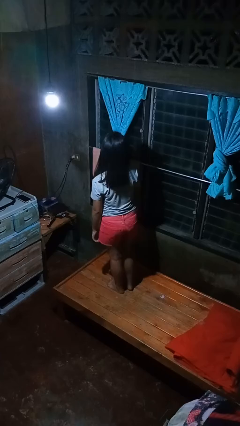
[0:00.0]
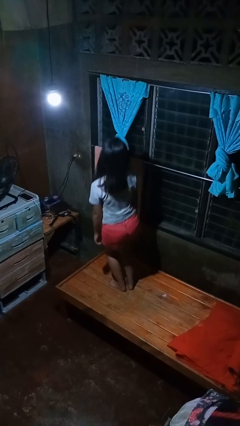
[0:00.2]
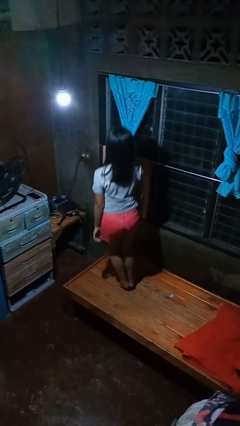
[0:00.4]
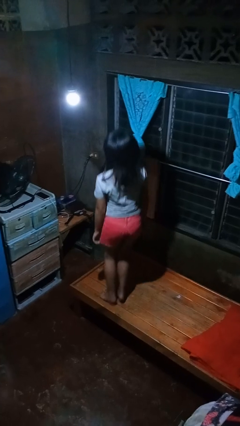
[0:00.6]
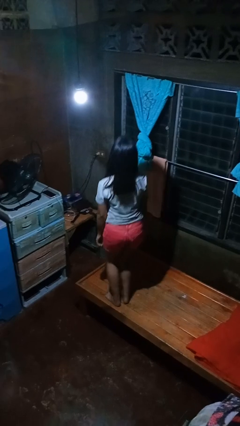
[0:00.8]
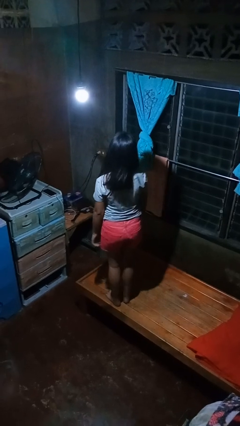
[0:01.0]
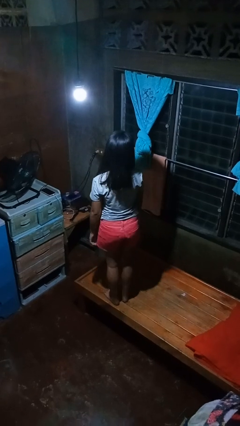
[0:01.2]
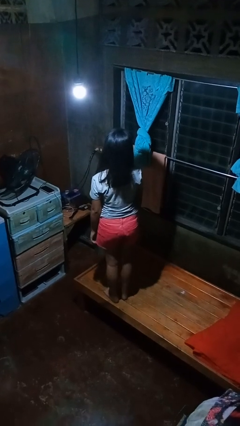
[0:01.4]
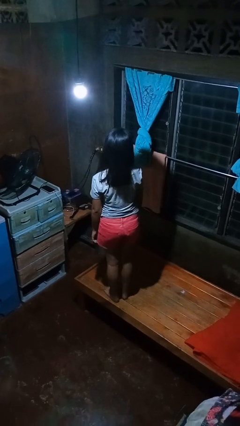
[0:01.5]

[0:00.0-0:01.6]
person jumps on bed

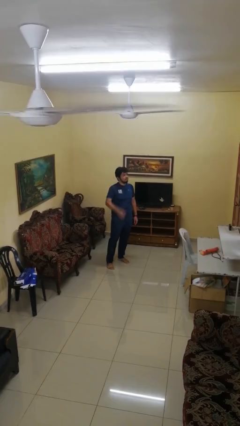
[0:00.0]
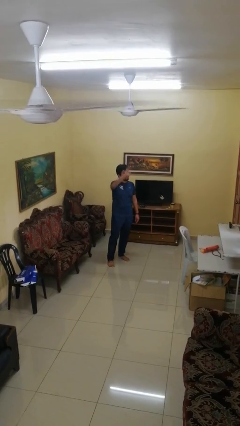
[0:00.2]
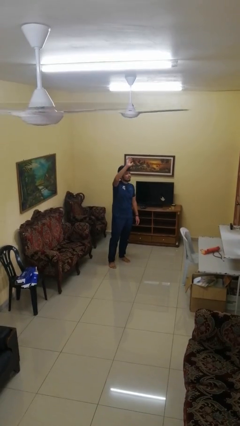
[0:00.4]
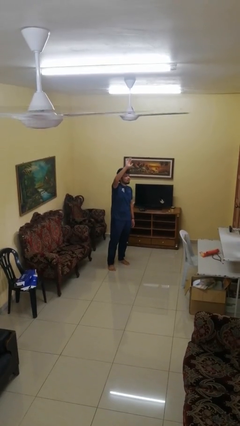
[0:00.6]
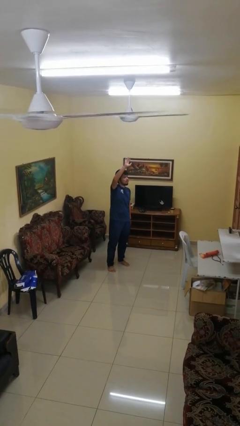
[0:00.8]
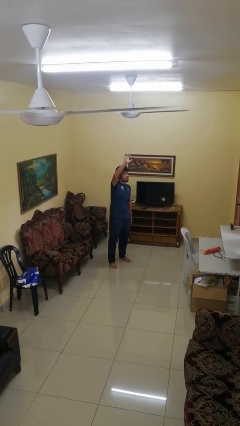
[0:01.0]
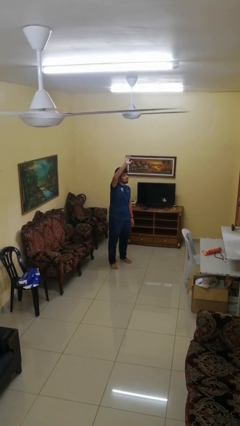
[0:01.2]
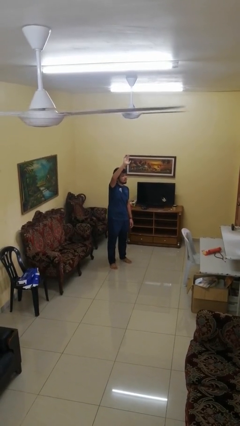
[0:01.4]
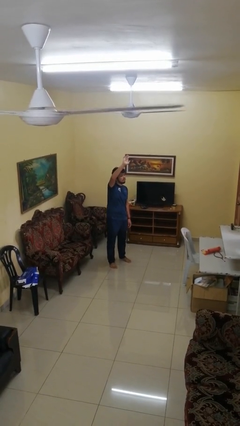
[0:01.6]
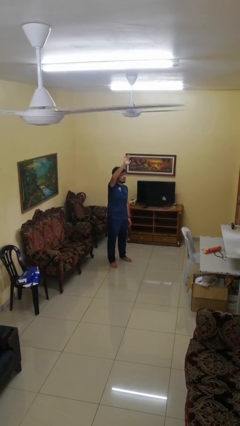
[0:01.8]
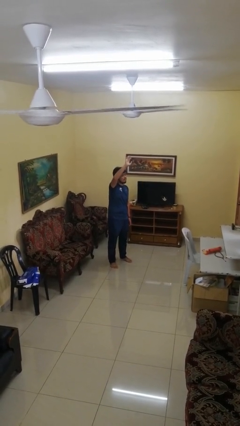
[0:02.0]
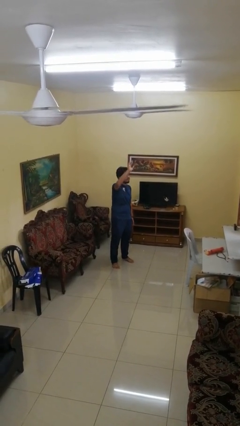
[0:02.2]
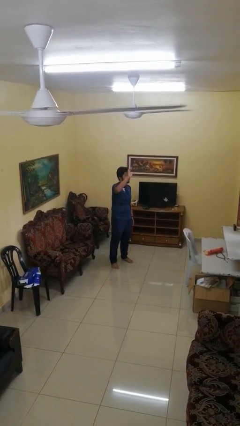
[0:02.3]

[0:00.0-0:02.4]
person gestures raise hand

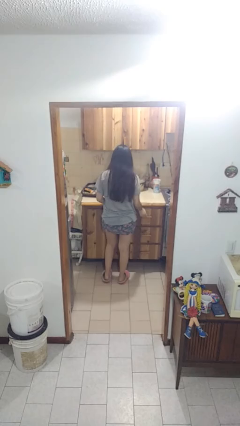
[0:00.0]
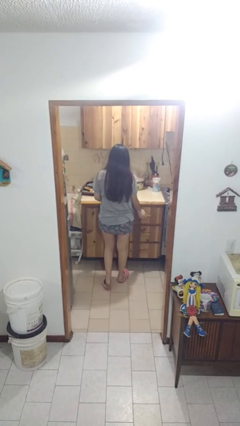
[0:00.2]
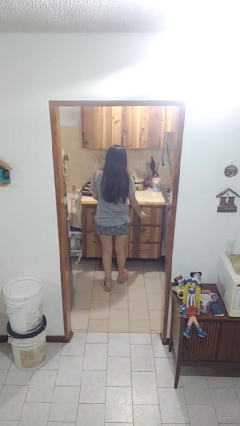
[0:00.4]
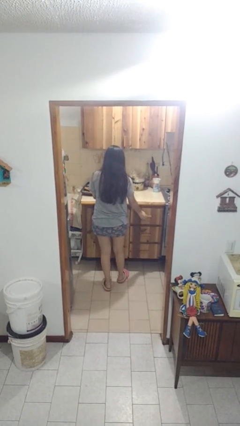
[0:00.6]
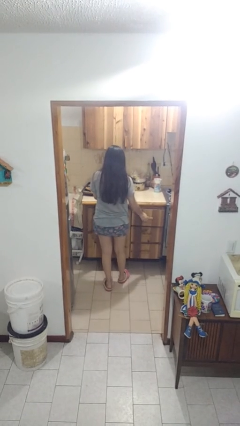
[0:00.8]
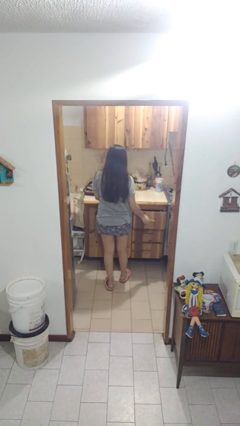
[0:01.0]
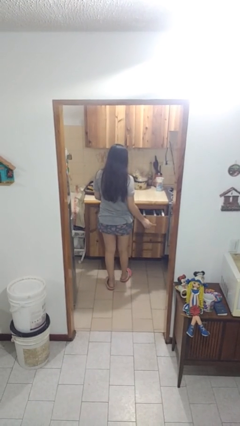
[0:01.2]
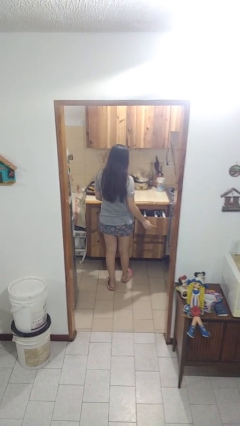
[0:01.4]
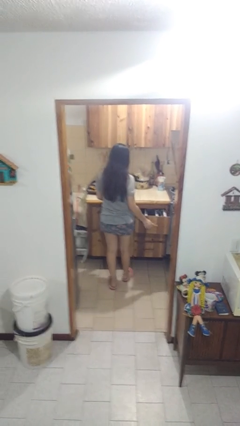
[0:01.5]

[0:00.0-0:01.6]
person opens kitchen drawer

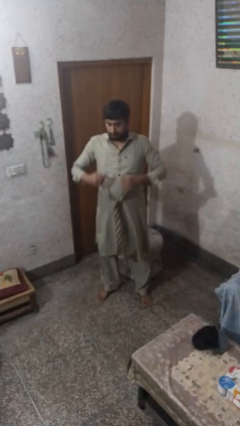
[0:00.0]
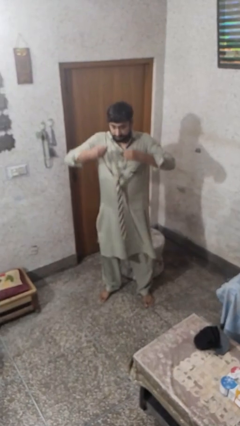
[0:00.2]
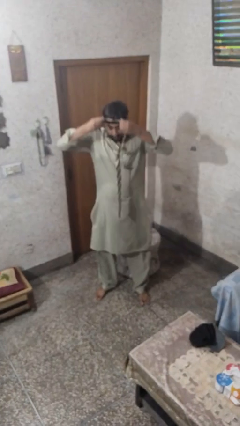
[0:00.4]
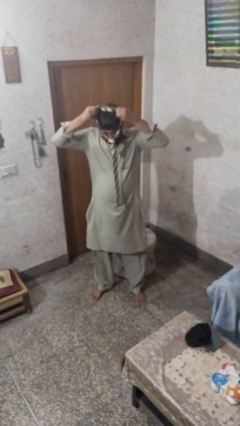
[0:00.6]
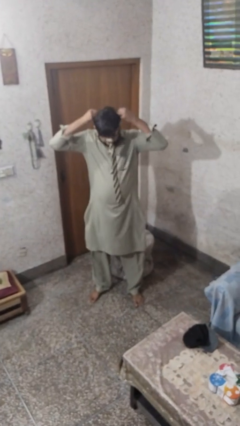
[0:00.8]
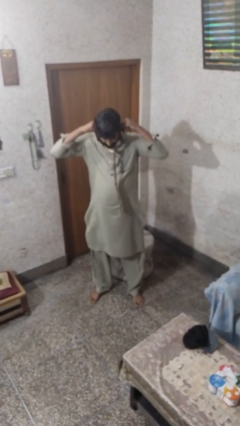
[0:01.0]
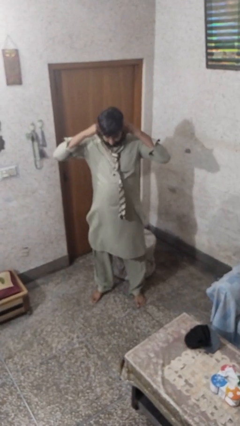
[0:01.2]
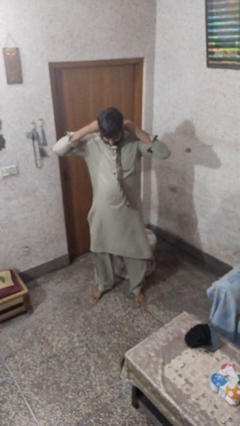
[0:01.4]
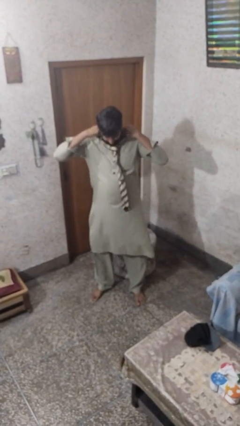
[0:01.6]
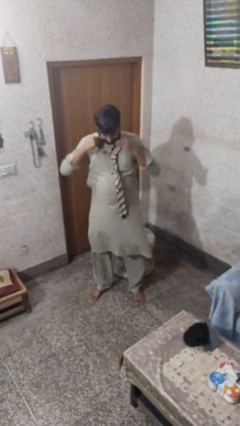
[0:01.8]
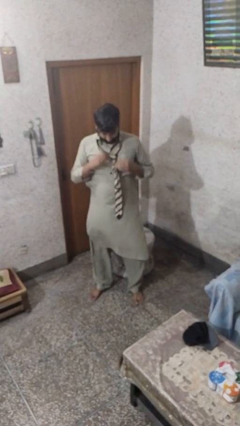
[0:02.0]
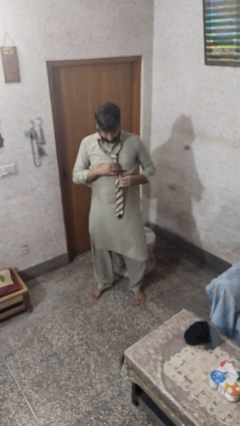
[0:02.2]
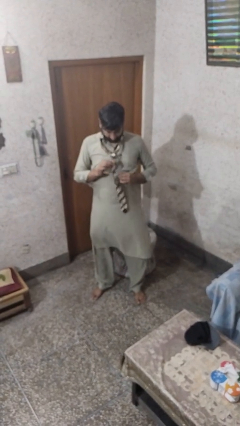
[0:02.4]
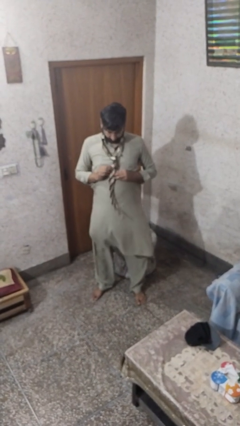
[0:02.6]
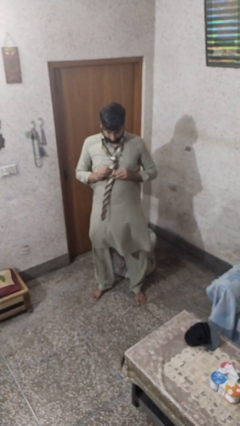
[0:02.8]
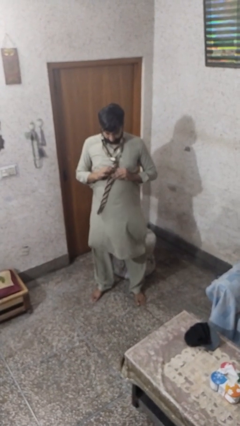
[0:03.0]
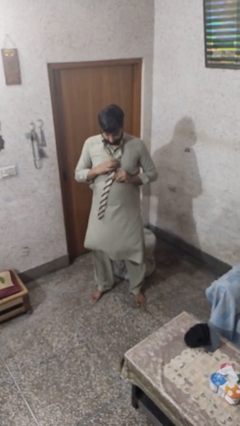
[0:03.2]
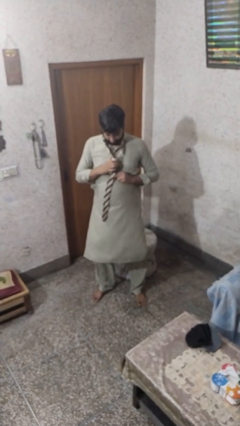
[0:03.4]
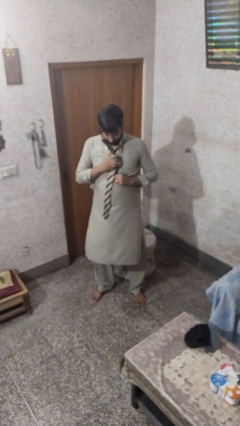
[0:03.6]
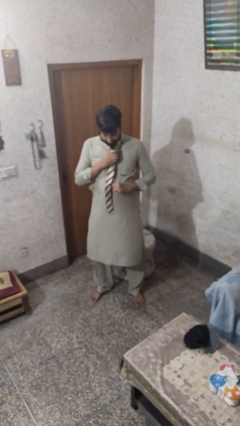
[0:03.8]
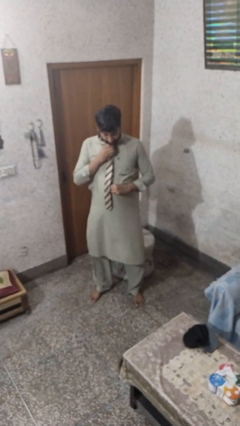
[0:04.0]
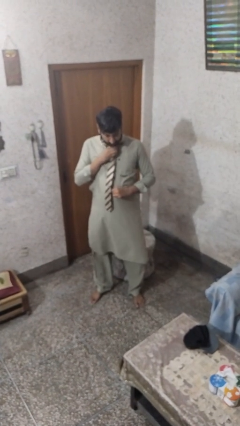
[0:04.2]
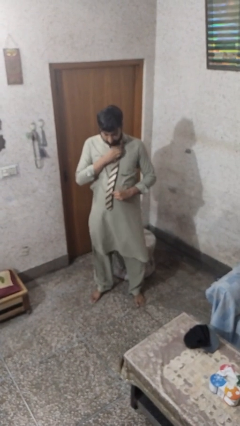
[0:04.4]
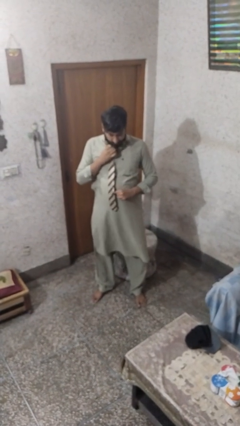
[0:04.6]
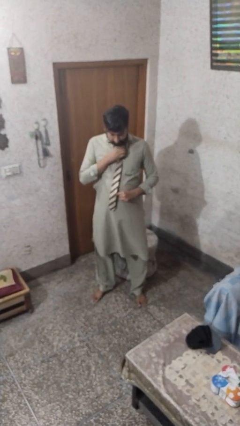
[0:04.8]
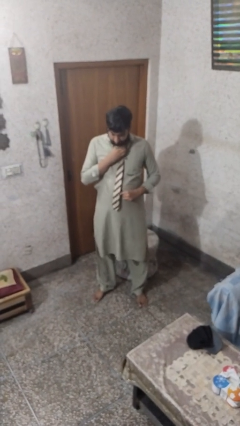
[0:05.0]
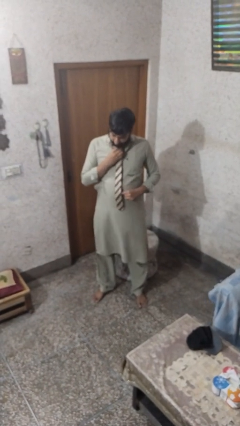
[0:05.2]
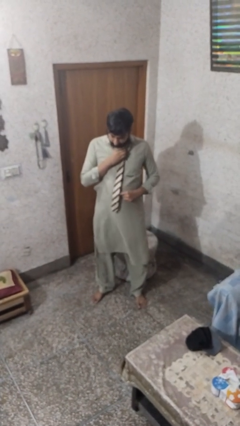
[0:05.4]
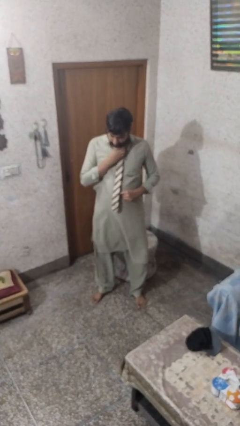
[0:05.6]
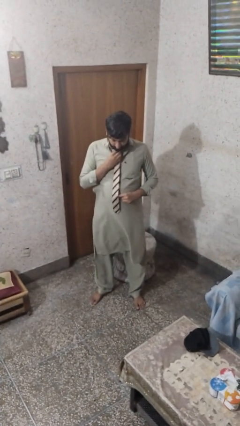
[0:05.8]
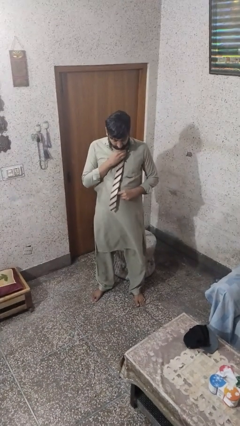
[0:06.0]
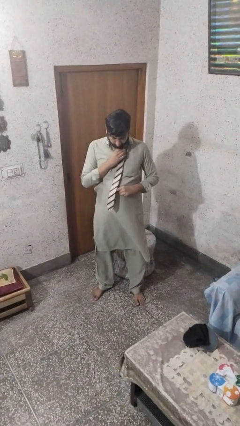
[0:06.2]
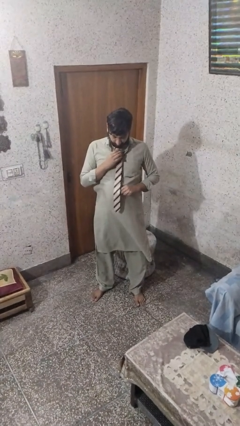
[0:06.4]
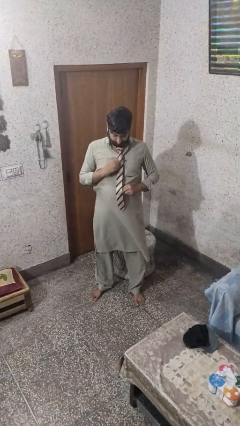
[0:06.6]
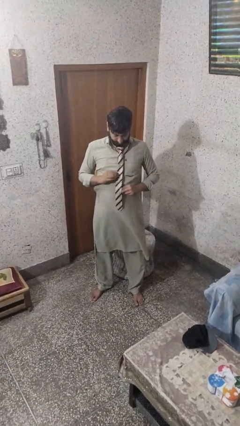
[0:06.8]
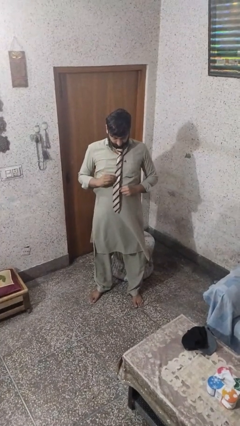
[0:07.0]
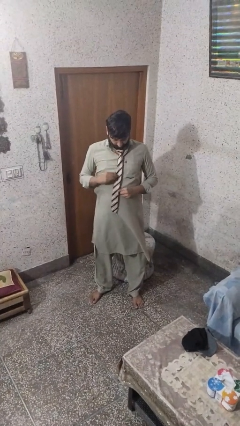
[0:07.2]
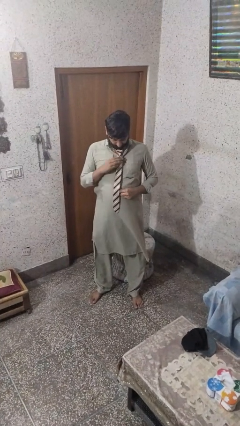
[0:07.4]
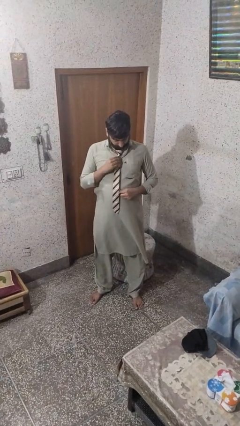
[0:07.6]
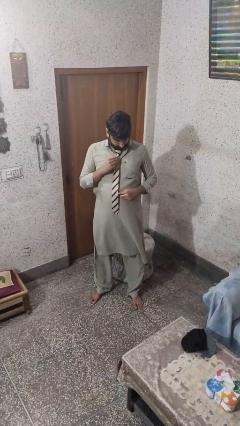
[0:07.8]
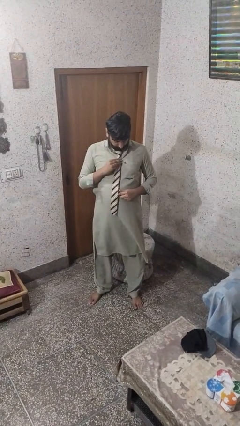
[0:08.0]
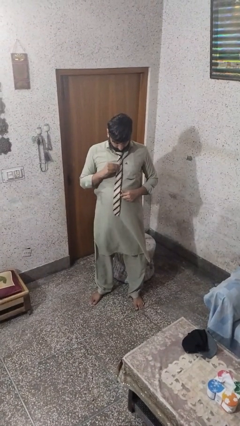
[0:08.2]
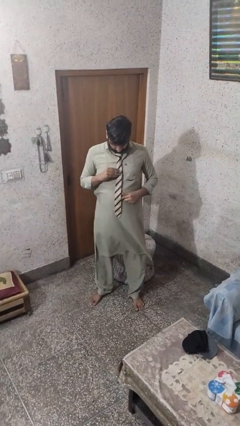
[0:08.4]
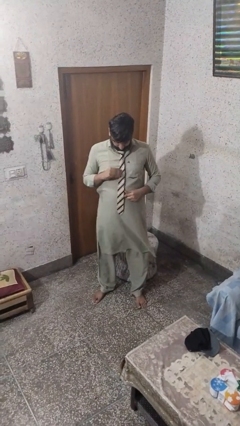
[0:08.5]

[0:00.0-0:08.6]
person puts on necktie

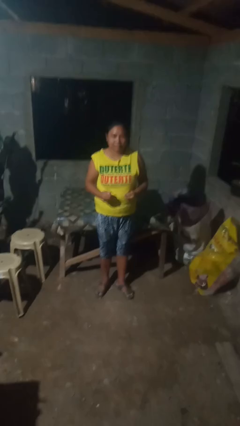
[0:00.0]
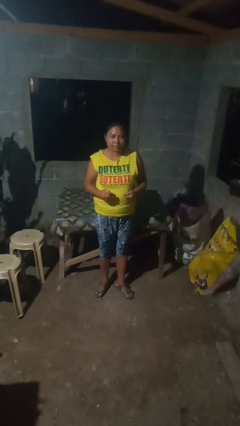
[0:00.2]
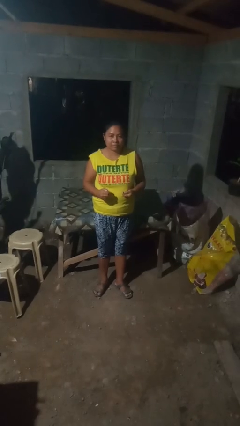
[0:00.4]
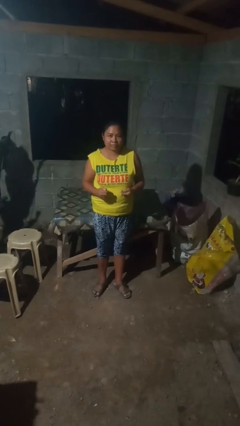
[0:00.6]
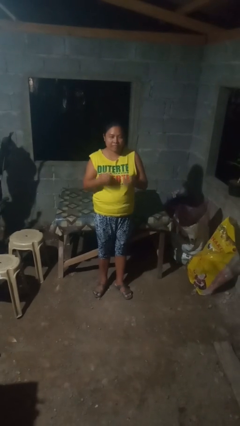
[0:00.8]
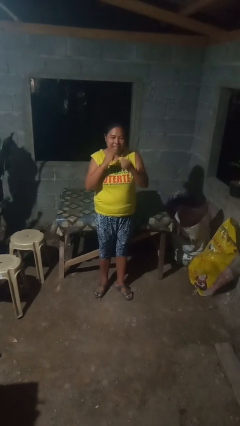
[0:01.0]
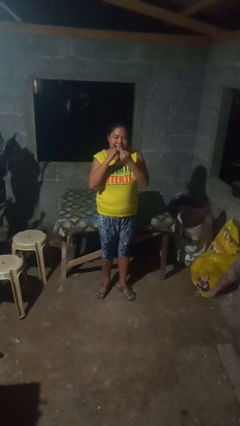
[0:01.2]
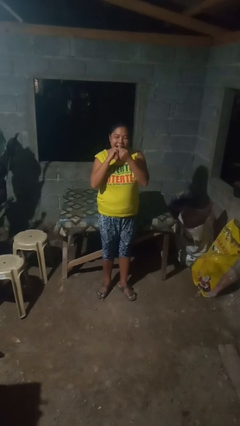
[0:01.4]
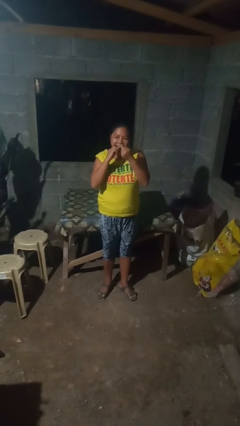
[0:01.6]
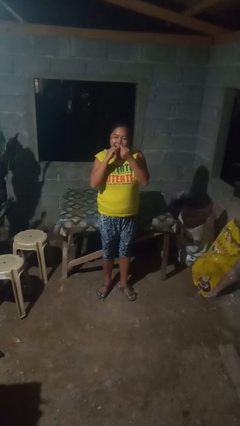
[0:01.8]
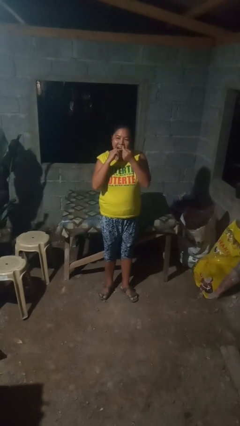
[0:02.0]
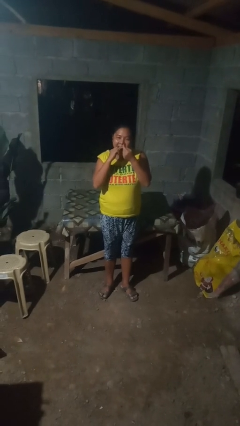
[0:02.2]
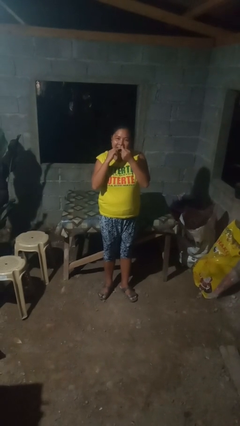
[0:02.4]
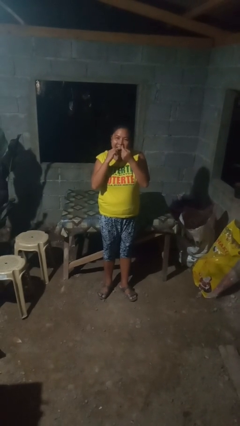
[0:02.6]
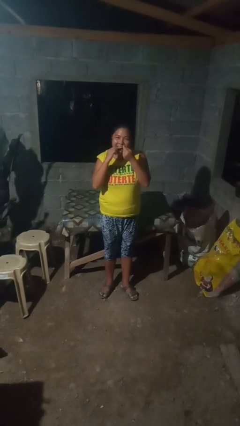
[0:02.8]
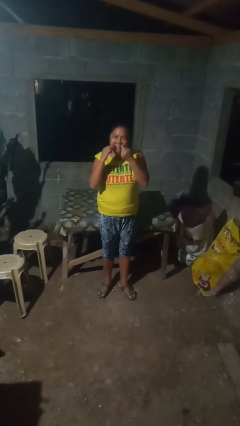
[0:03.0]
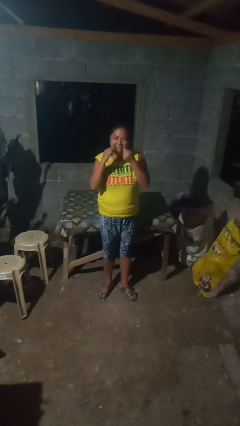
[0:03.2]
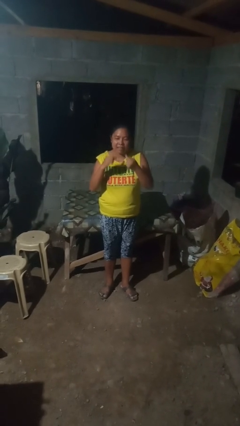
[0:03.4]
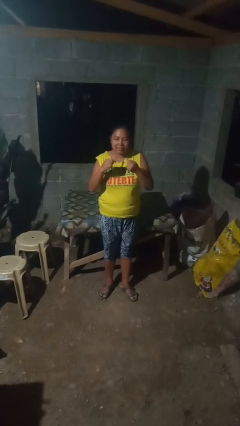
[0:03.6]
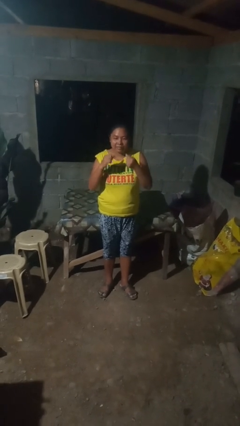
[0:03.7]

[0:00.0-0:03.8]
person flosses

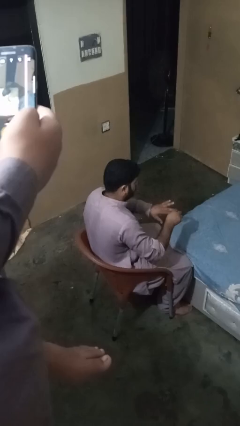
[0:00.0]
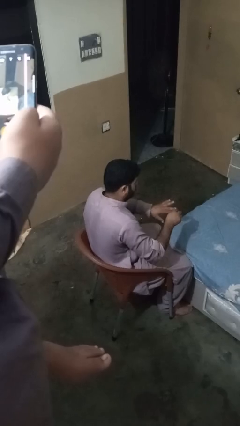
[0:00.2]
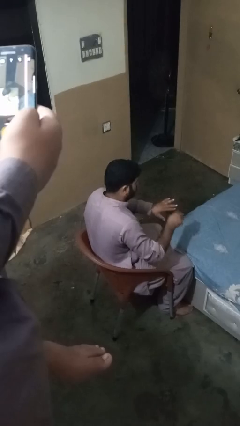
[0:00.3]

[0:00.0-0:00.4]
person files fingernails
